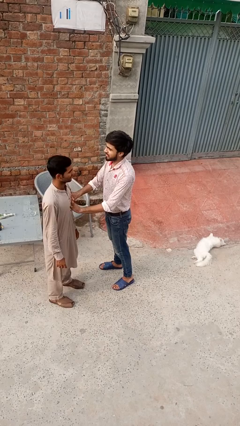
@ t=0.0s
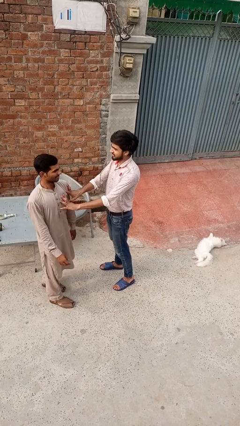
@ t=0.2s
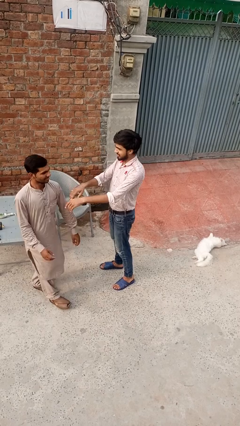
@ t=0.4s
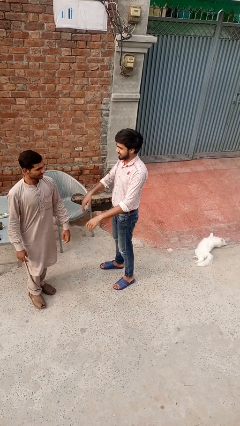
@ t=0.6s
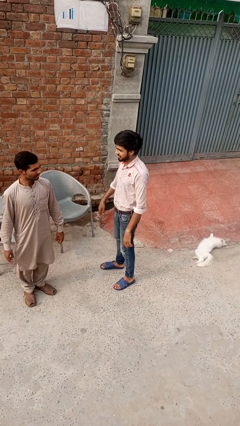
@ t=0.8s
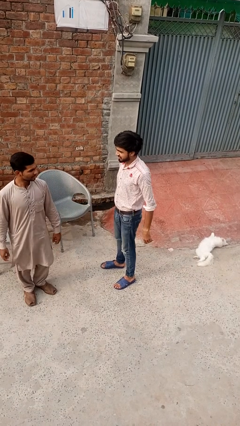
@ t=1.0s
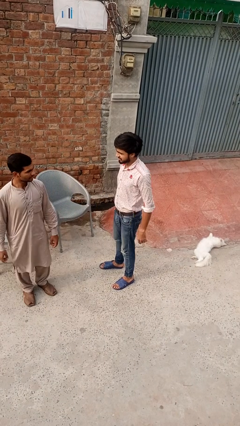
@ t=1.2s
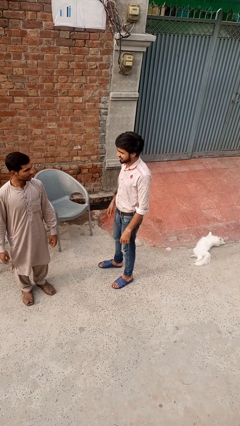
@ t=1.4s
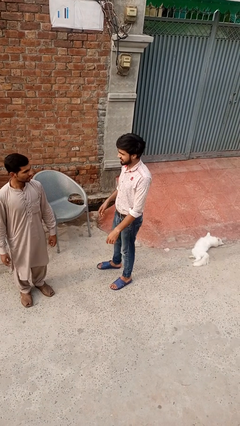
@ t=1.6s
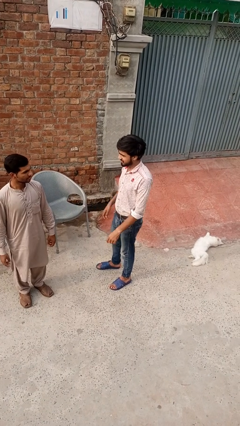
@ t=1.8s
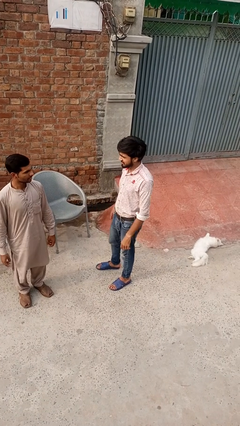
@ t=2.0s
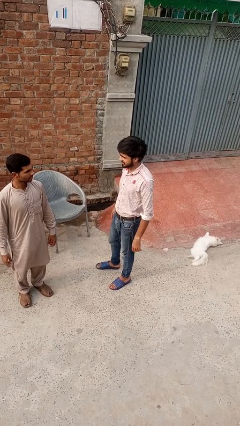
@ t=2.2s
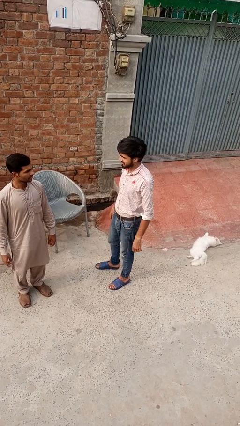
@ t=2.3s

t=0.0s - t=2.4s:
person grabs person by forearm

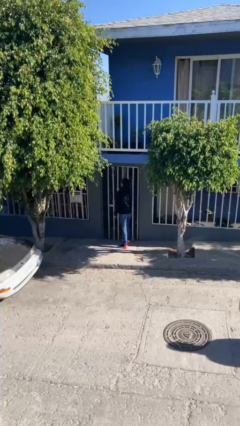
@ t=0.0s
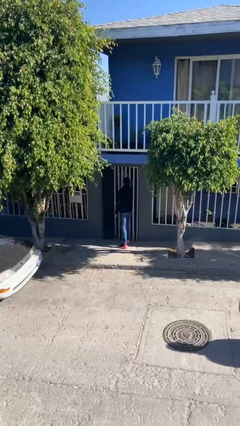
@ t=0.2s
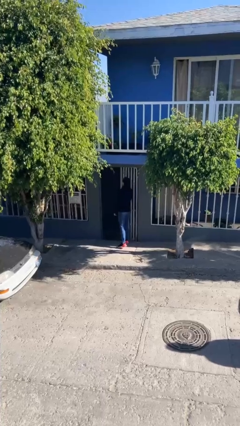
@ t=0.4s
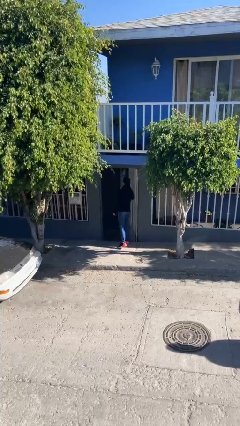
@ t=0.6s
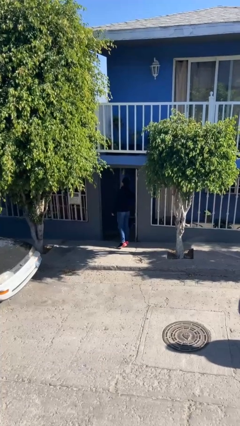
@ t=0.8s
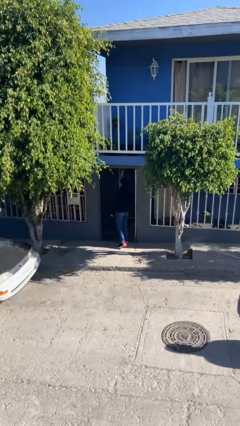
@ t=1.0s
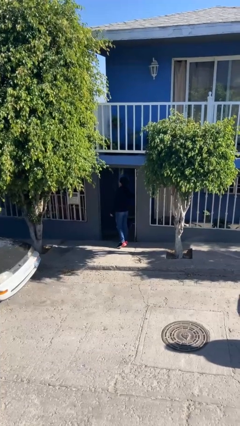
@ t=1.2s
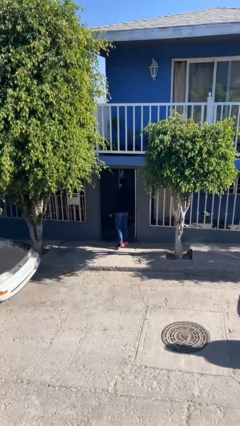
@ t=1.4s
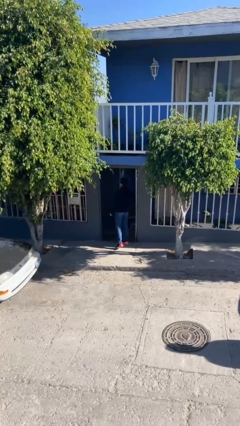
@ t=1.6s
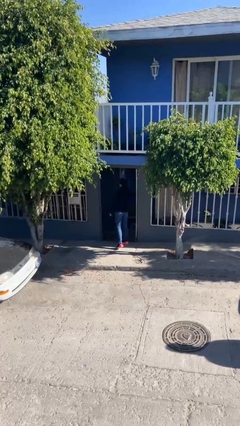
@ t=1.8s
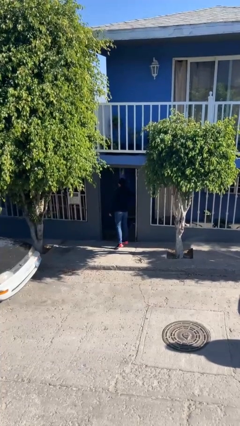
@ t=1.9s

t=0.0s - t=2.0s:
person opens facility door

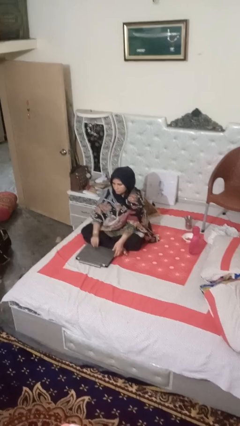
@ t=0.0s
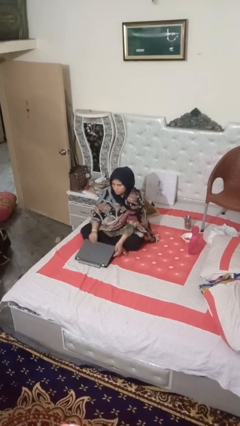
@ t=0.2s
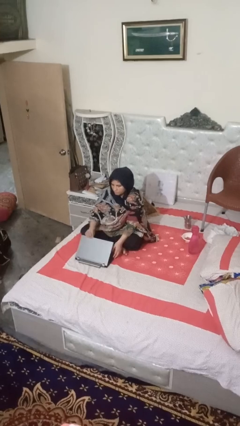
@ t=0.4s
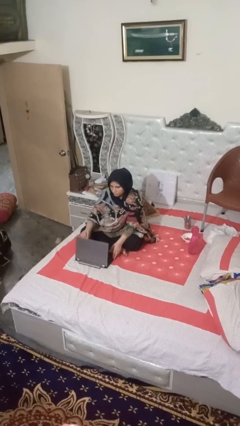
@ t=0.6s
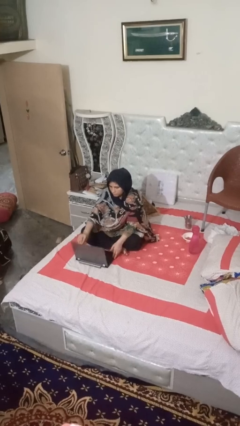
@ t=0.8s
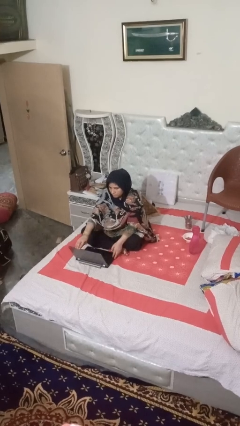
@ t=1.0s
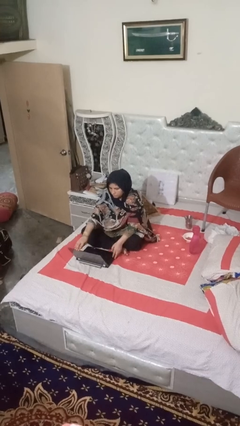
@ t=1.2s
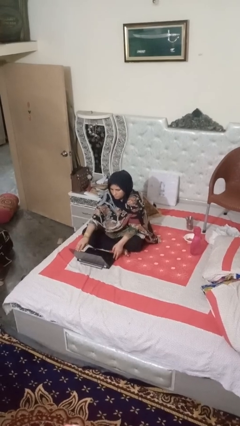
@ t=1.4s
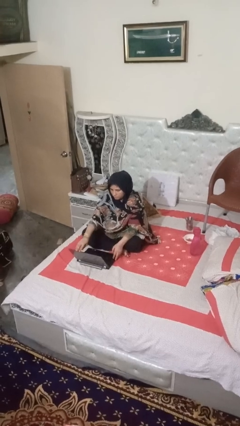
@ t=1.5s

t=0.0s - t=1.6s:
person opens laptop

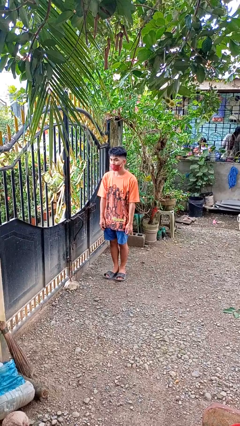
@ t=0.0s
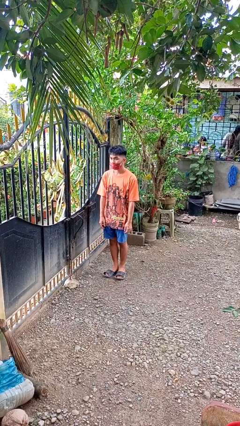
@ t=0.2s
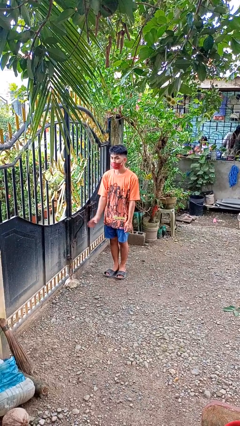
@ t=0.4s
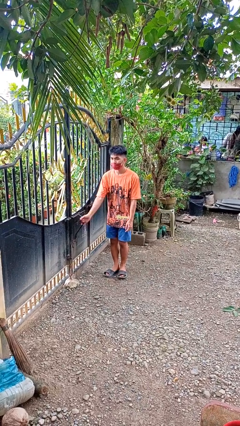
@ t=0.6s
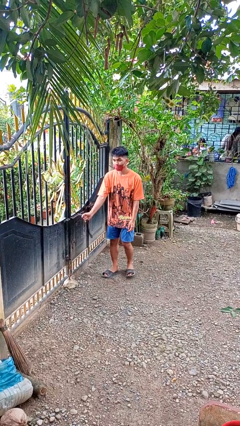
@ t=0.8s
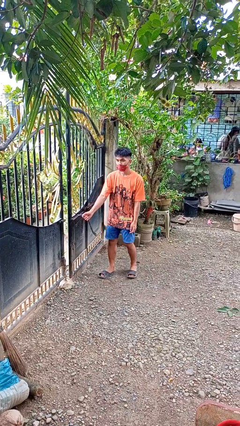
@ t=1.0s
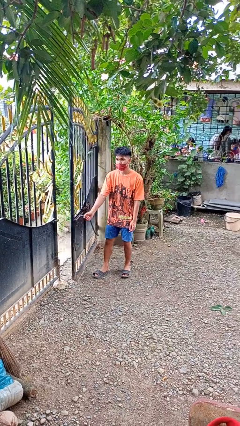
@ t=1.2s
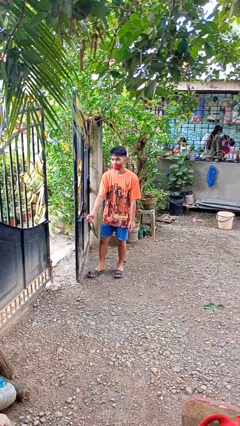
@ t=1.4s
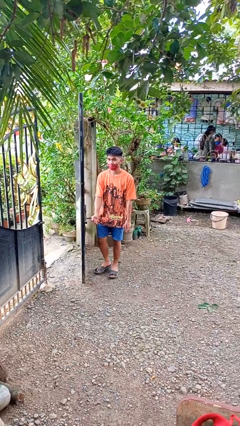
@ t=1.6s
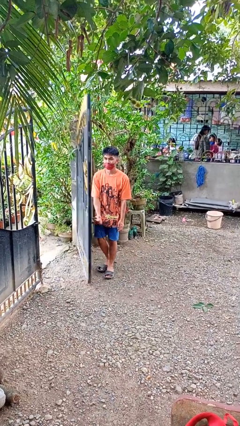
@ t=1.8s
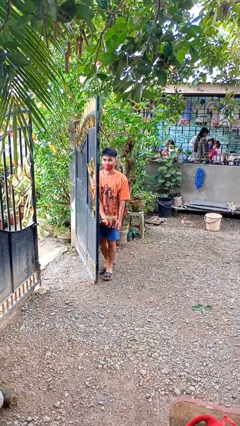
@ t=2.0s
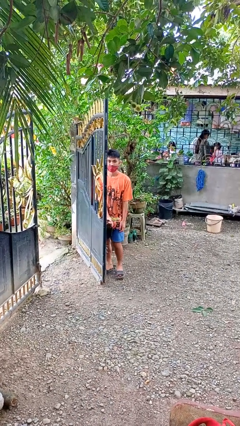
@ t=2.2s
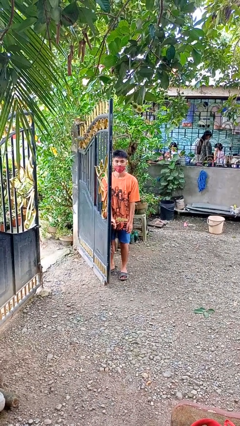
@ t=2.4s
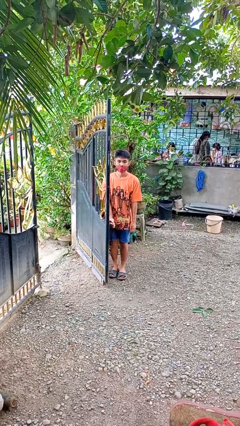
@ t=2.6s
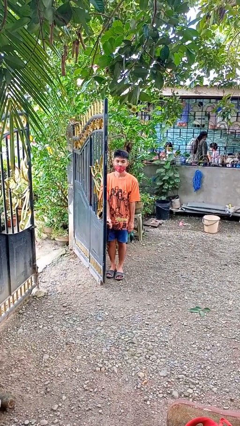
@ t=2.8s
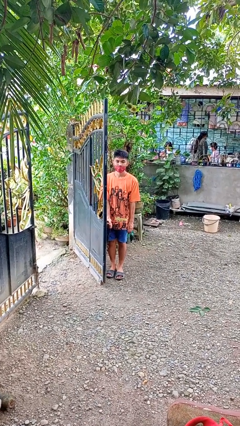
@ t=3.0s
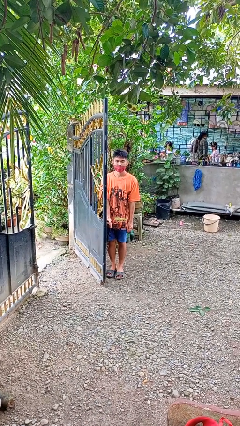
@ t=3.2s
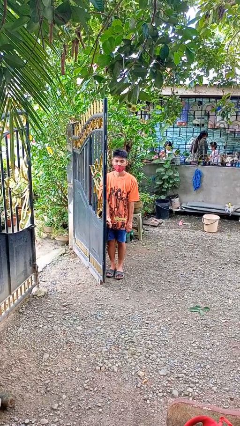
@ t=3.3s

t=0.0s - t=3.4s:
person opens gate

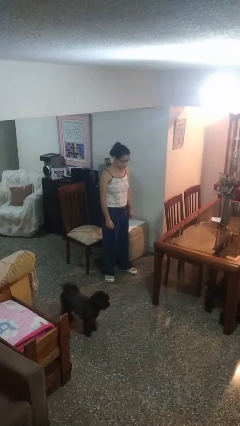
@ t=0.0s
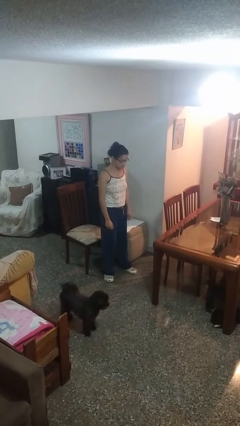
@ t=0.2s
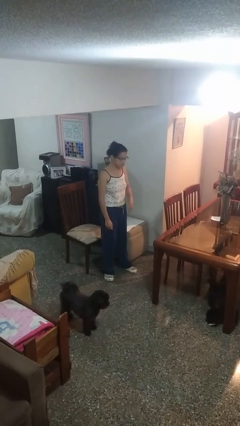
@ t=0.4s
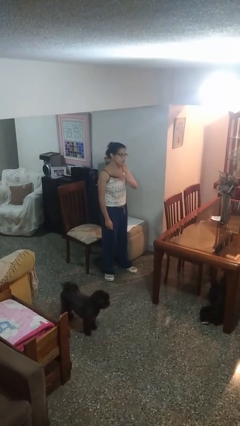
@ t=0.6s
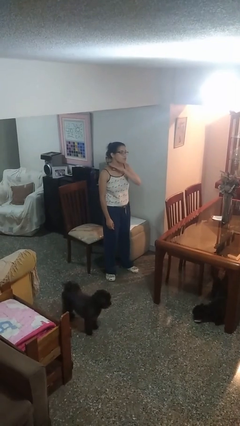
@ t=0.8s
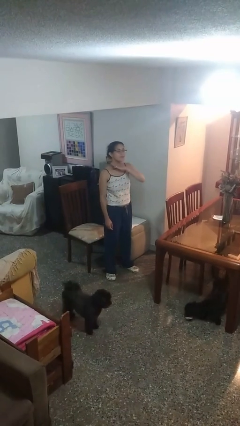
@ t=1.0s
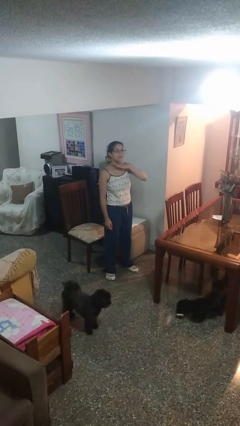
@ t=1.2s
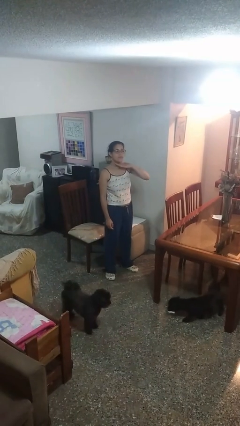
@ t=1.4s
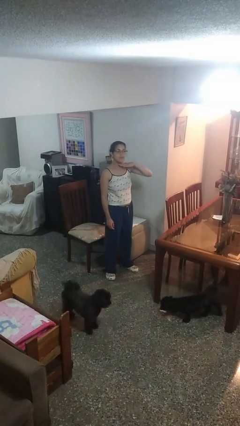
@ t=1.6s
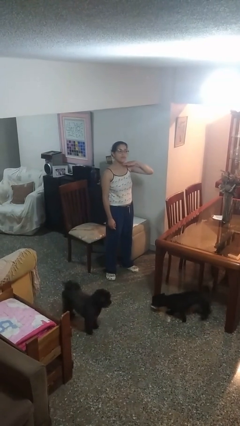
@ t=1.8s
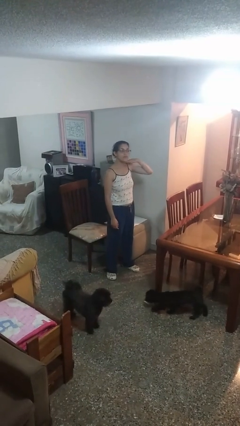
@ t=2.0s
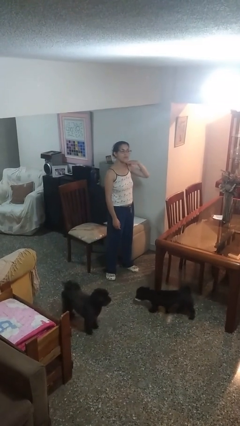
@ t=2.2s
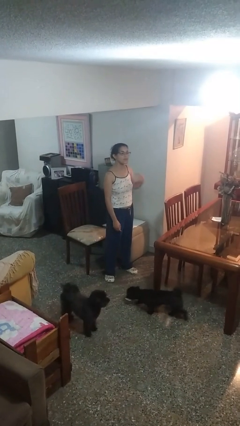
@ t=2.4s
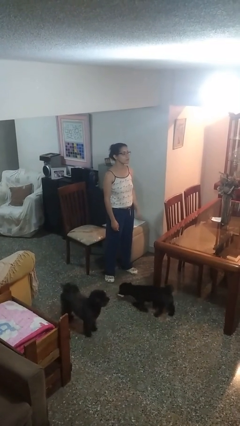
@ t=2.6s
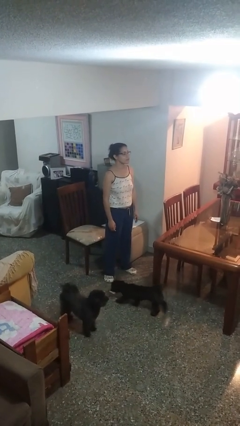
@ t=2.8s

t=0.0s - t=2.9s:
person gestures cut

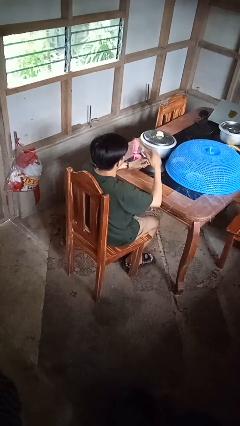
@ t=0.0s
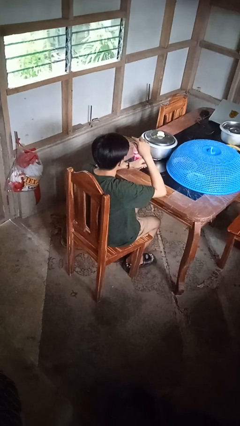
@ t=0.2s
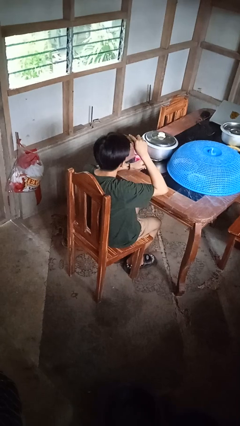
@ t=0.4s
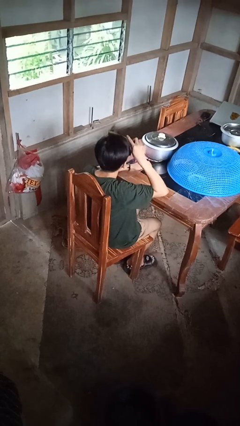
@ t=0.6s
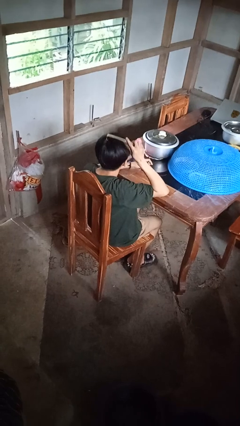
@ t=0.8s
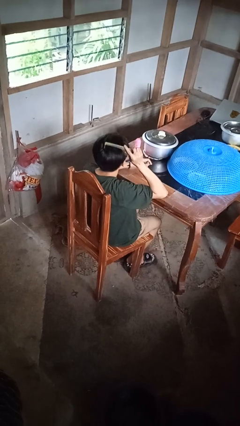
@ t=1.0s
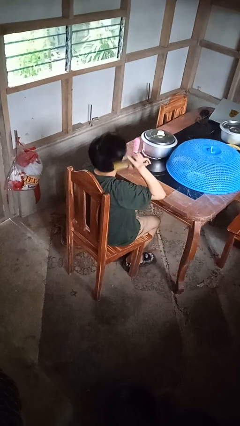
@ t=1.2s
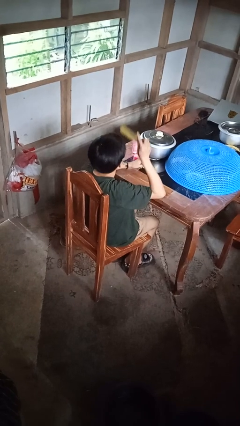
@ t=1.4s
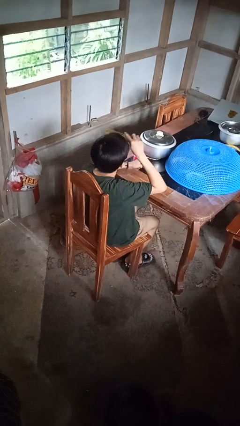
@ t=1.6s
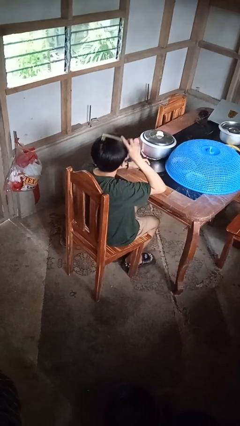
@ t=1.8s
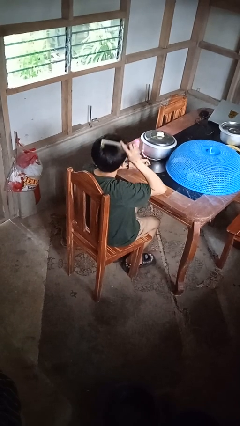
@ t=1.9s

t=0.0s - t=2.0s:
person brushes hair

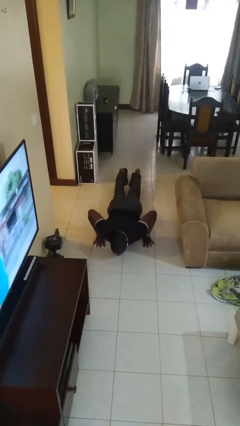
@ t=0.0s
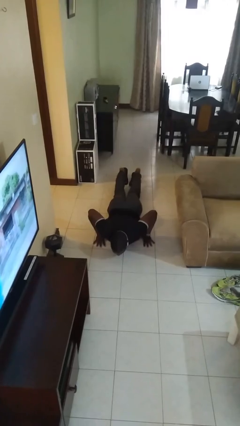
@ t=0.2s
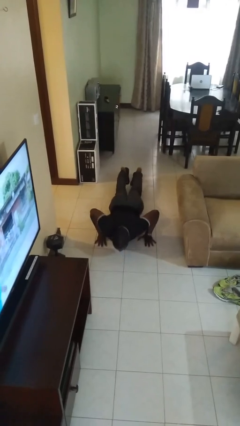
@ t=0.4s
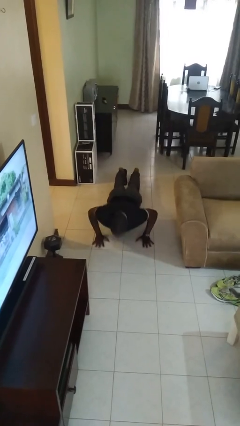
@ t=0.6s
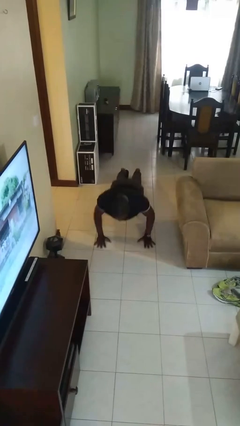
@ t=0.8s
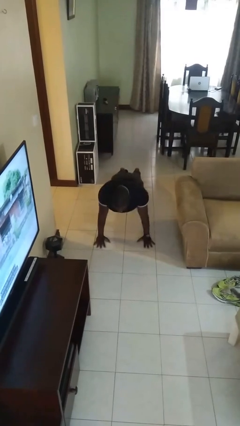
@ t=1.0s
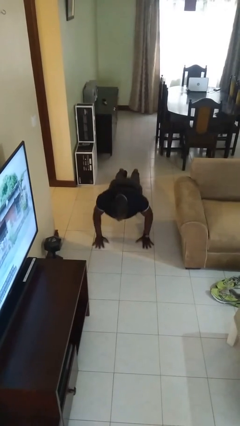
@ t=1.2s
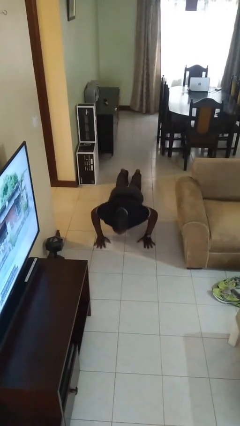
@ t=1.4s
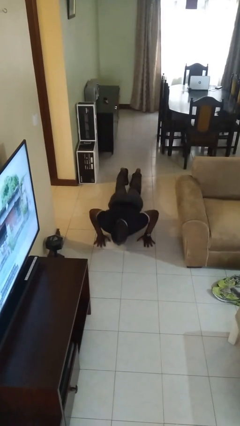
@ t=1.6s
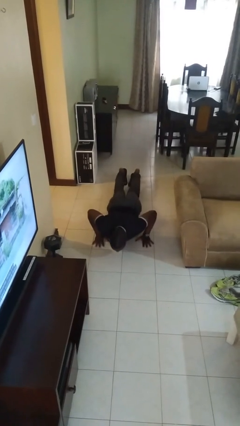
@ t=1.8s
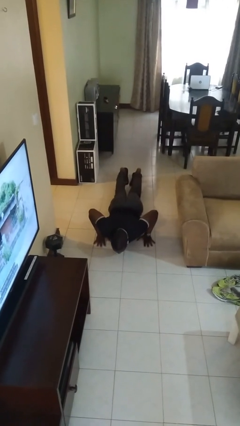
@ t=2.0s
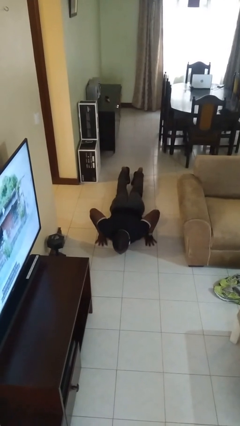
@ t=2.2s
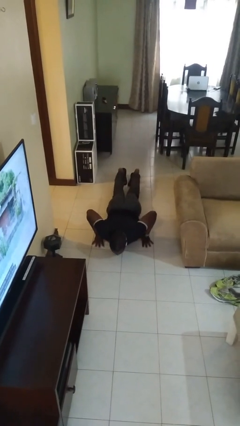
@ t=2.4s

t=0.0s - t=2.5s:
person exercises with pushup

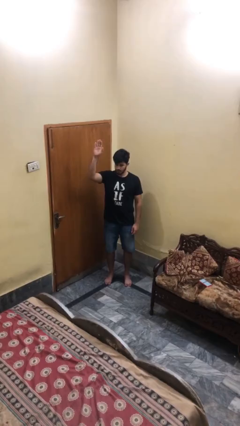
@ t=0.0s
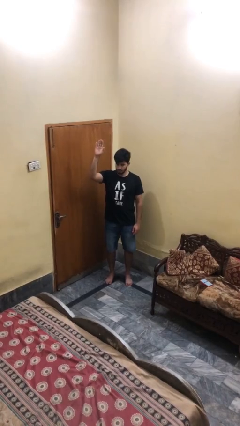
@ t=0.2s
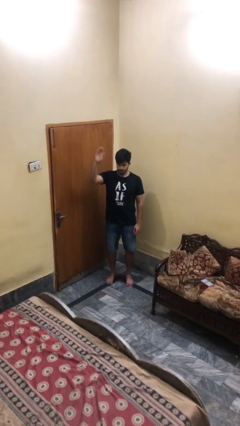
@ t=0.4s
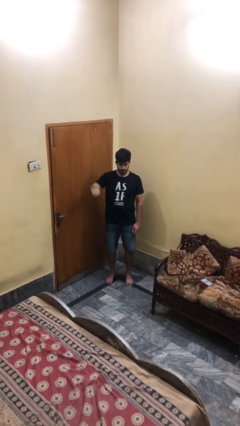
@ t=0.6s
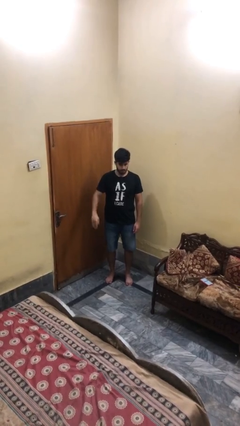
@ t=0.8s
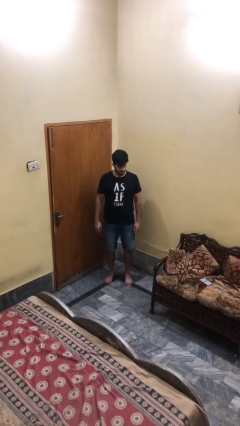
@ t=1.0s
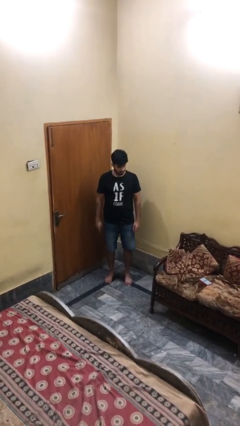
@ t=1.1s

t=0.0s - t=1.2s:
person gestures lower hand
